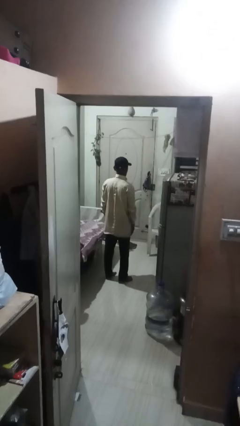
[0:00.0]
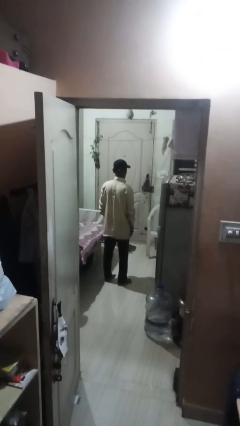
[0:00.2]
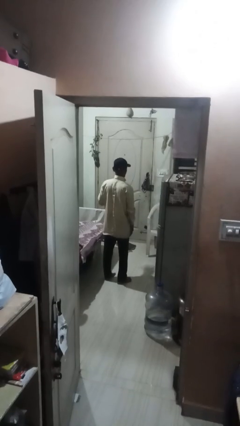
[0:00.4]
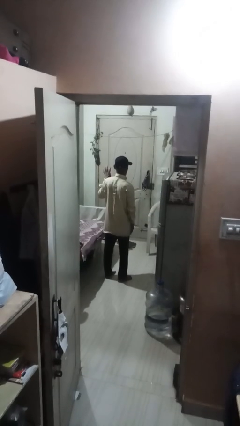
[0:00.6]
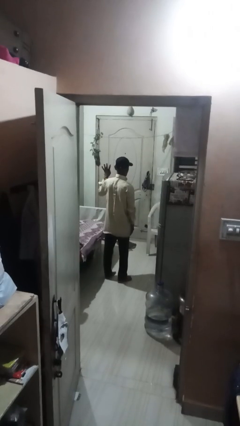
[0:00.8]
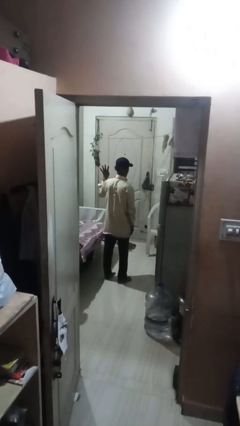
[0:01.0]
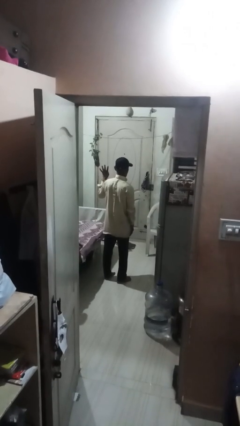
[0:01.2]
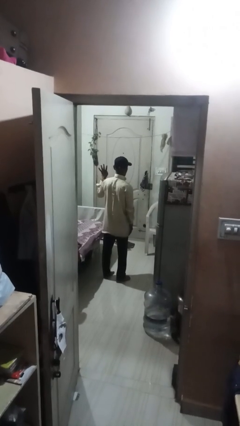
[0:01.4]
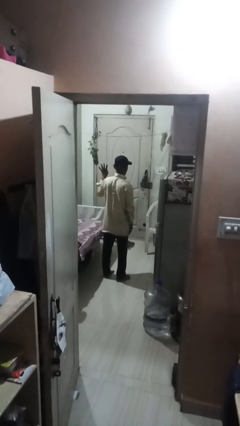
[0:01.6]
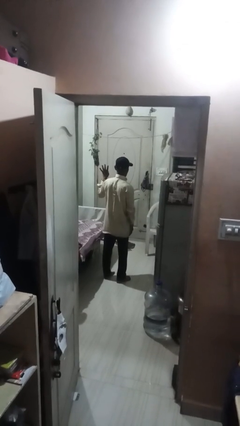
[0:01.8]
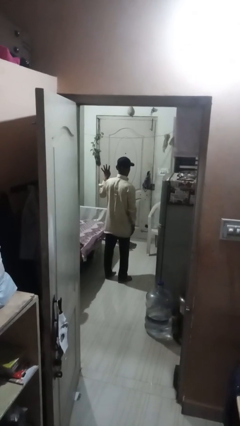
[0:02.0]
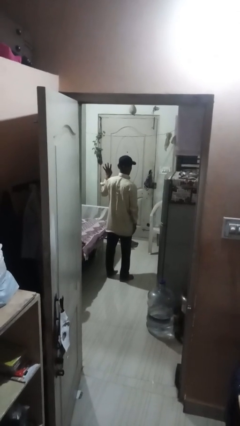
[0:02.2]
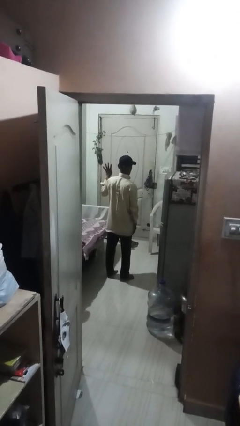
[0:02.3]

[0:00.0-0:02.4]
person gestures number four

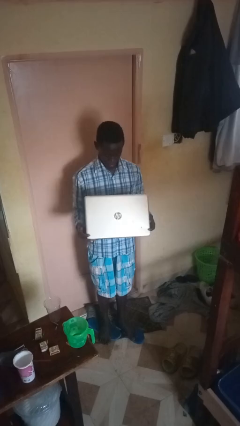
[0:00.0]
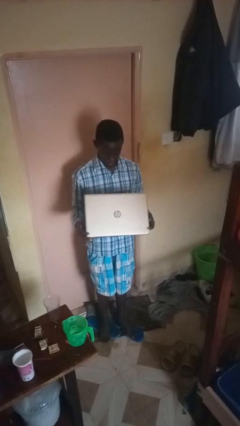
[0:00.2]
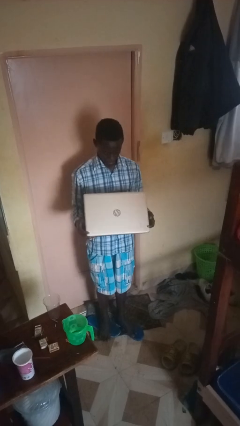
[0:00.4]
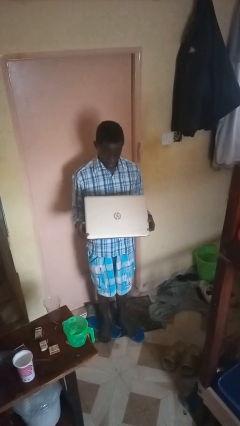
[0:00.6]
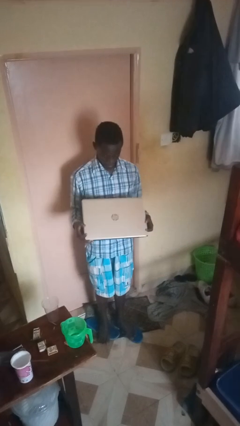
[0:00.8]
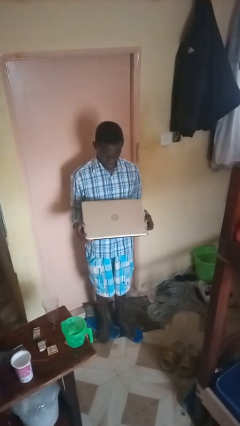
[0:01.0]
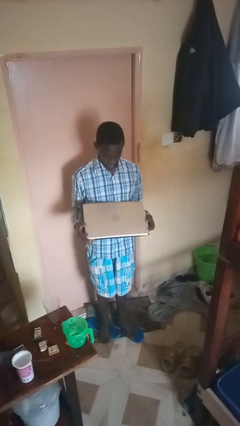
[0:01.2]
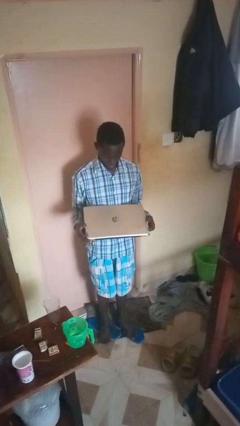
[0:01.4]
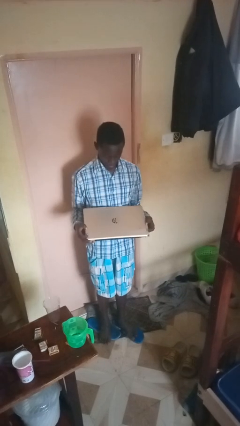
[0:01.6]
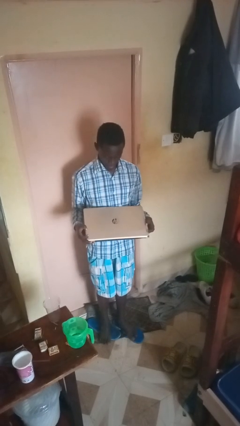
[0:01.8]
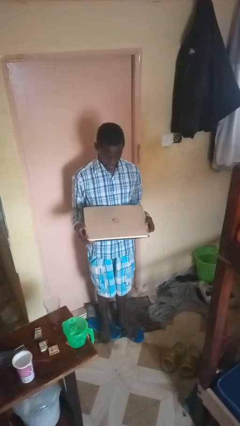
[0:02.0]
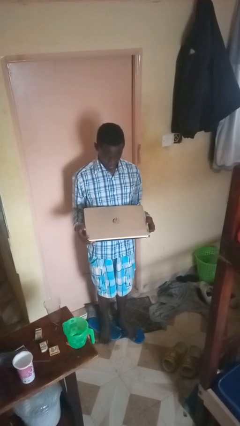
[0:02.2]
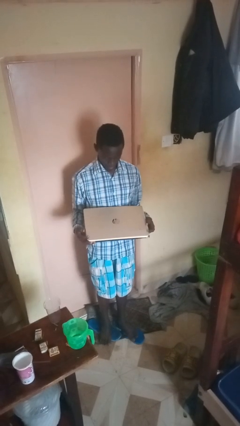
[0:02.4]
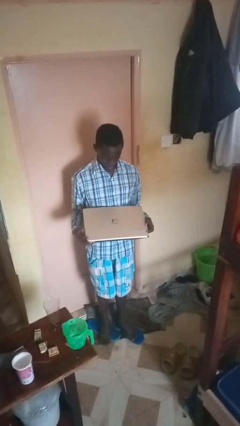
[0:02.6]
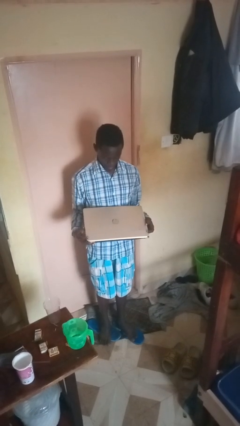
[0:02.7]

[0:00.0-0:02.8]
person closes laptop

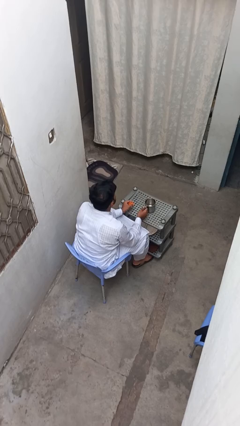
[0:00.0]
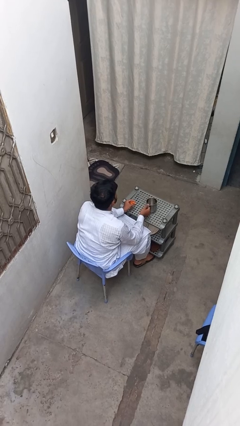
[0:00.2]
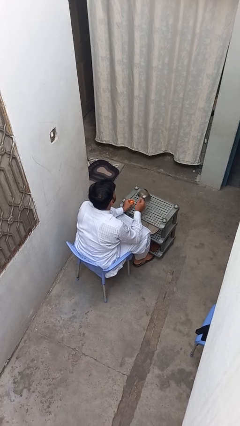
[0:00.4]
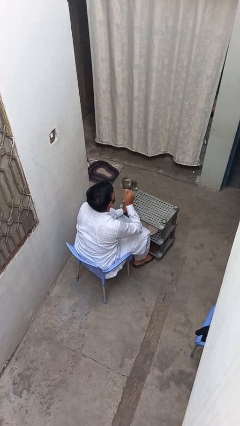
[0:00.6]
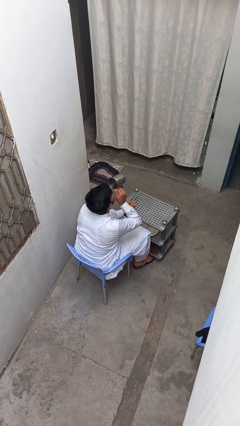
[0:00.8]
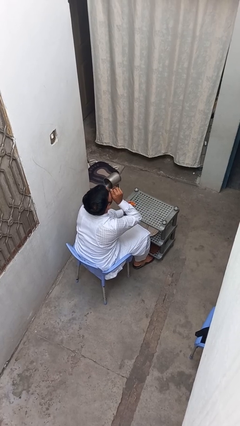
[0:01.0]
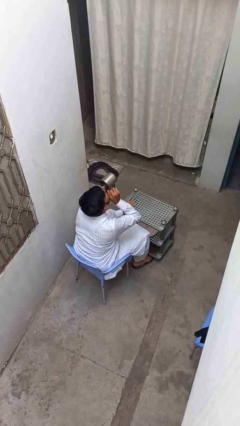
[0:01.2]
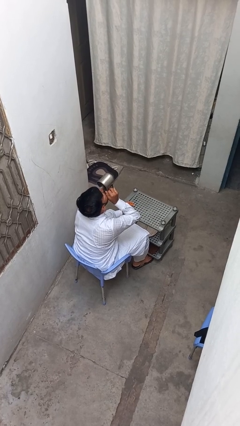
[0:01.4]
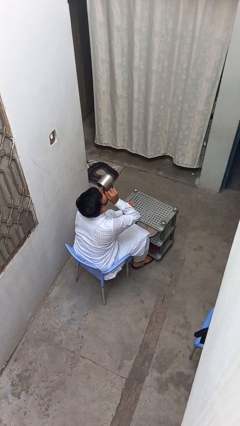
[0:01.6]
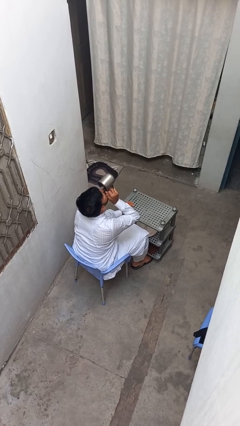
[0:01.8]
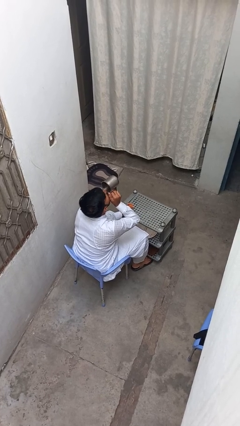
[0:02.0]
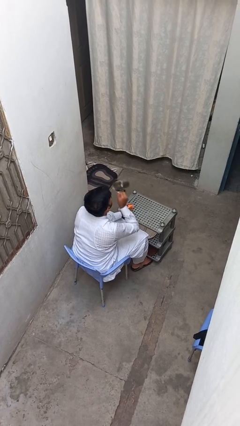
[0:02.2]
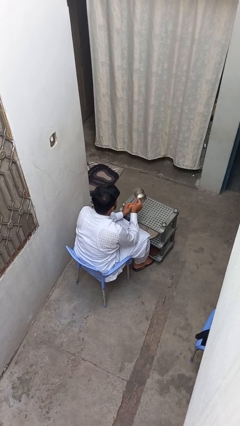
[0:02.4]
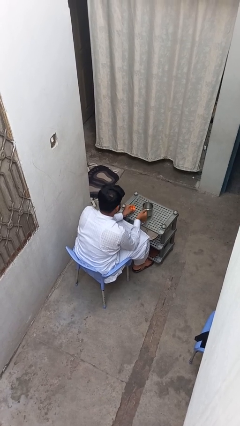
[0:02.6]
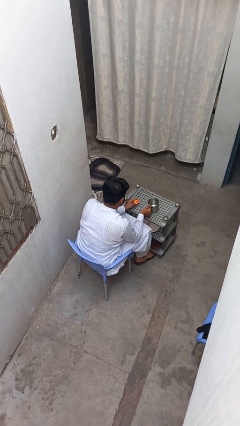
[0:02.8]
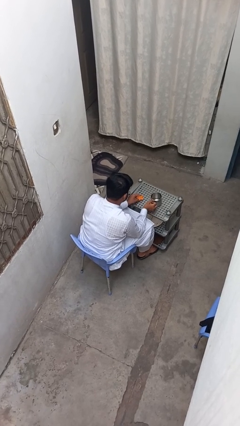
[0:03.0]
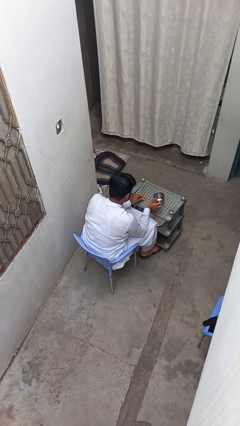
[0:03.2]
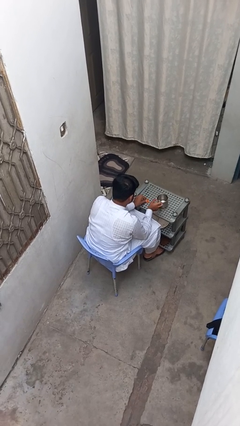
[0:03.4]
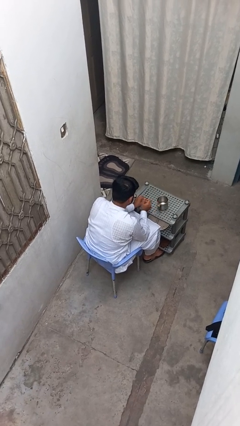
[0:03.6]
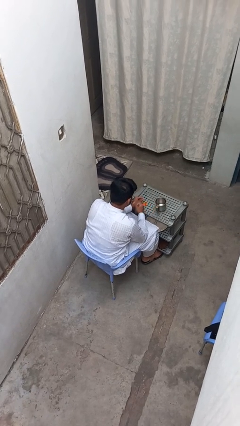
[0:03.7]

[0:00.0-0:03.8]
person drinks from cup

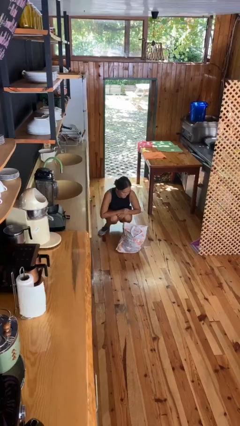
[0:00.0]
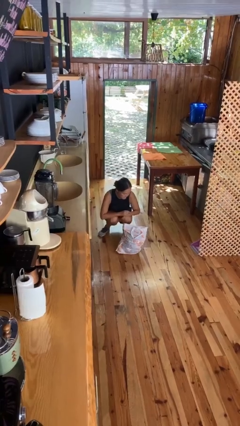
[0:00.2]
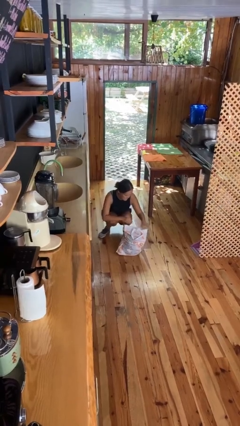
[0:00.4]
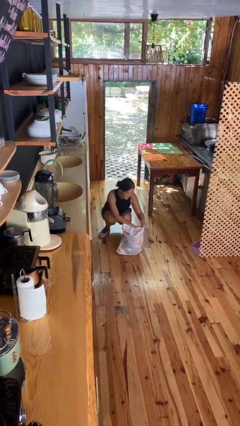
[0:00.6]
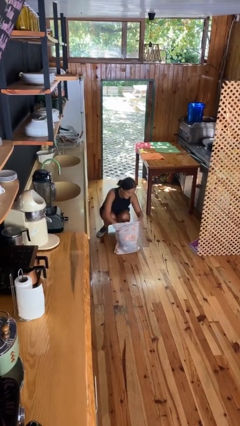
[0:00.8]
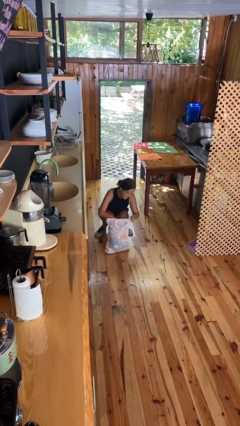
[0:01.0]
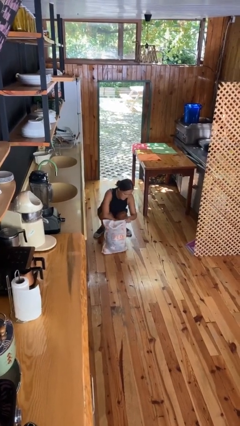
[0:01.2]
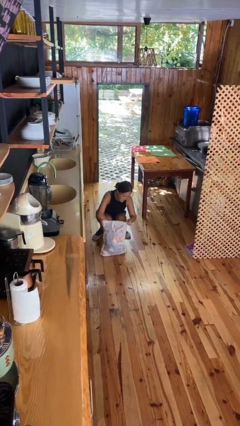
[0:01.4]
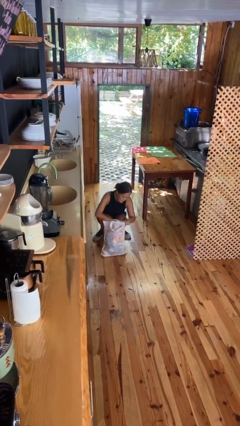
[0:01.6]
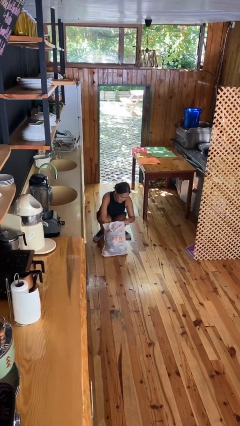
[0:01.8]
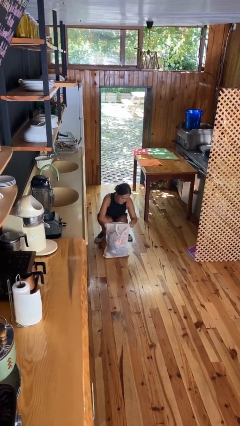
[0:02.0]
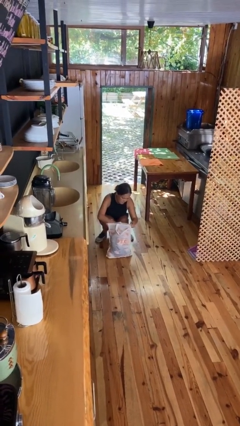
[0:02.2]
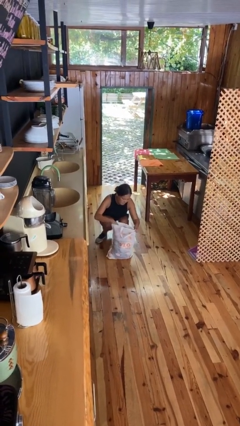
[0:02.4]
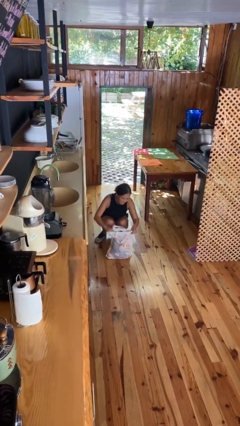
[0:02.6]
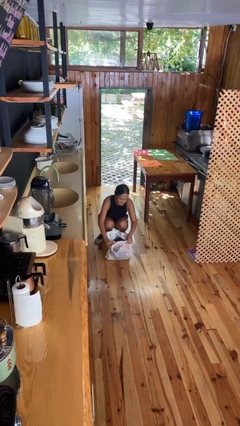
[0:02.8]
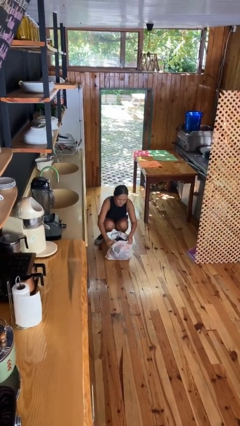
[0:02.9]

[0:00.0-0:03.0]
person searches in bag

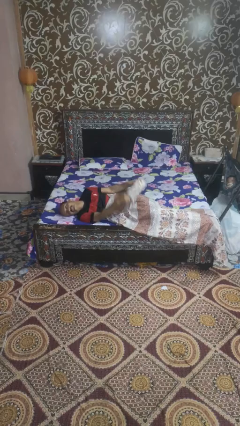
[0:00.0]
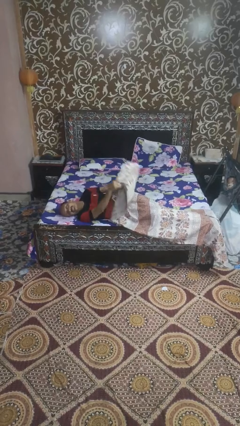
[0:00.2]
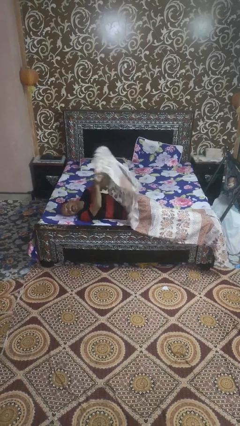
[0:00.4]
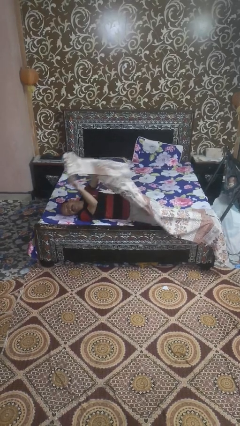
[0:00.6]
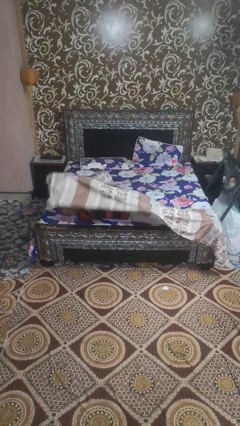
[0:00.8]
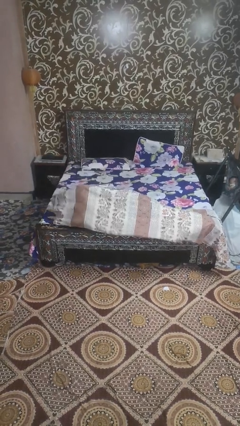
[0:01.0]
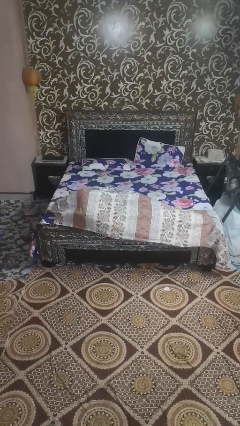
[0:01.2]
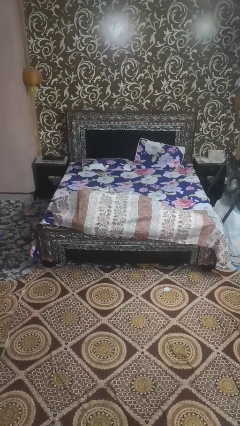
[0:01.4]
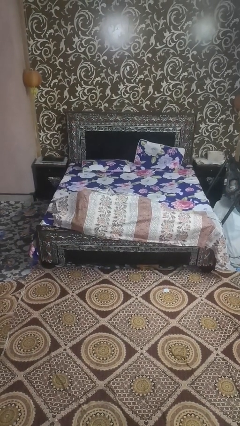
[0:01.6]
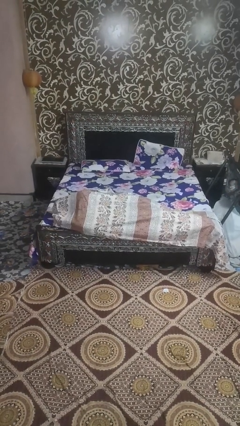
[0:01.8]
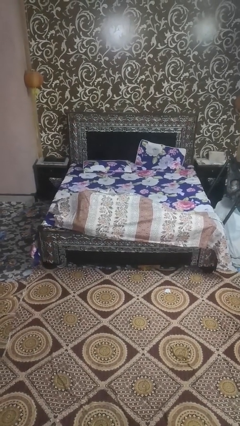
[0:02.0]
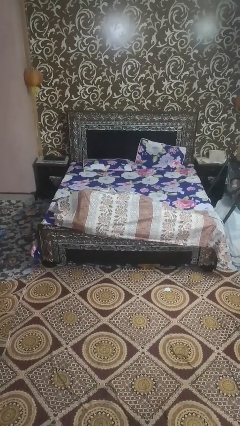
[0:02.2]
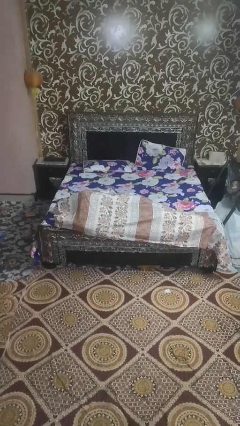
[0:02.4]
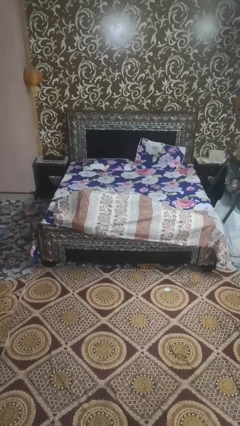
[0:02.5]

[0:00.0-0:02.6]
person covers with bedsheets

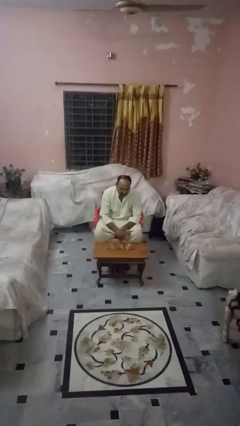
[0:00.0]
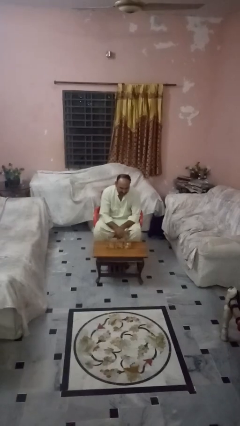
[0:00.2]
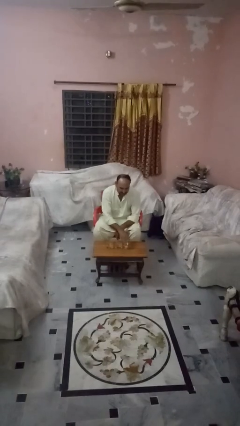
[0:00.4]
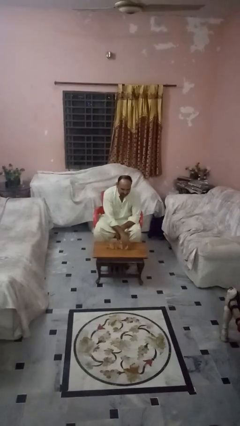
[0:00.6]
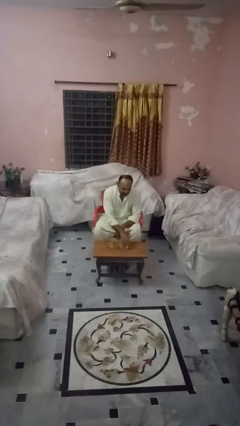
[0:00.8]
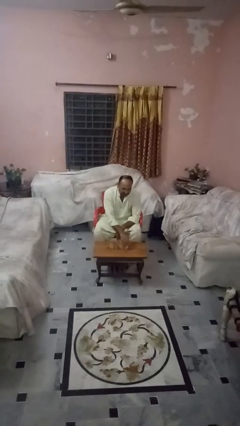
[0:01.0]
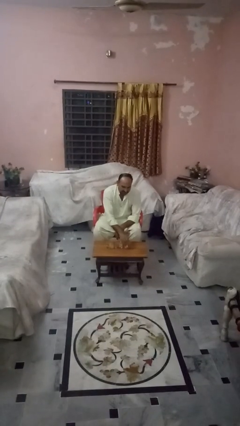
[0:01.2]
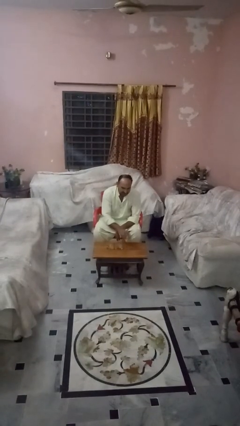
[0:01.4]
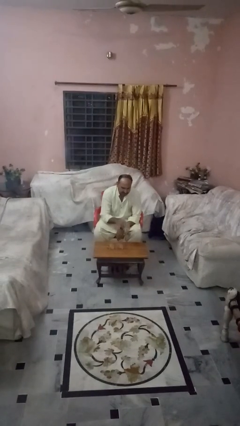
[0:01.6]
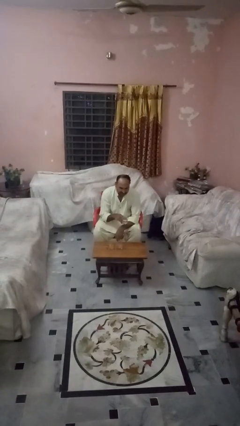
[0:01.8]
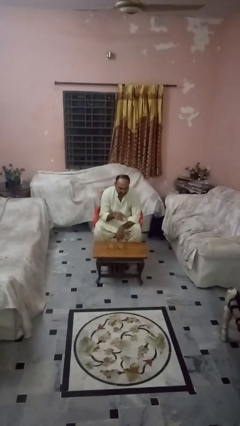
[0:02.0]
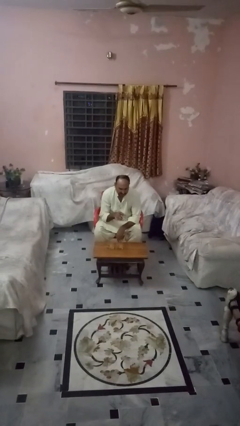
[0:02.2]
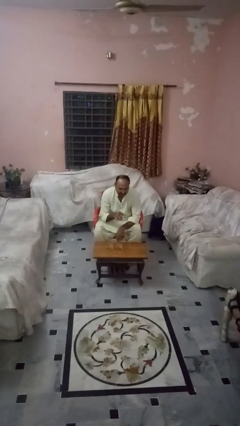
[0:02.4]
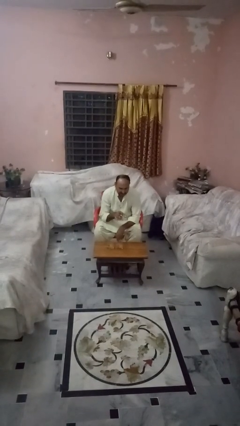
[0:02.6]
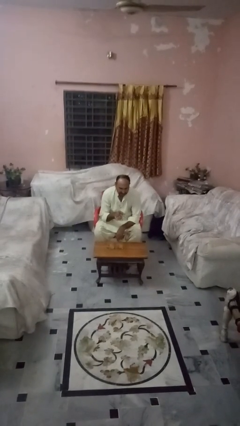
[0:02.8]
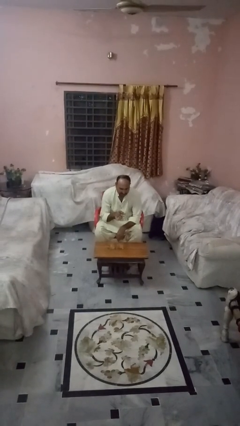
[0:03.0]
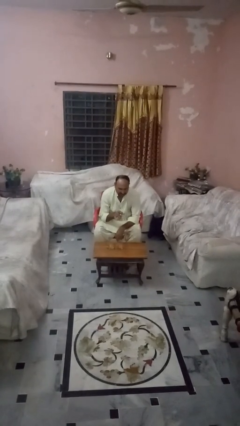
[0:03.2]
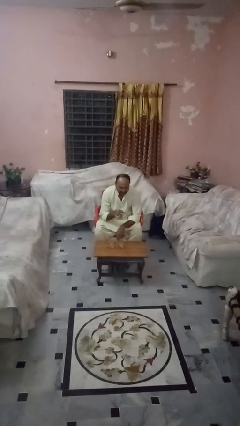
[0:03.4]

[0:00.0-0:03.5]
person picks up object from table
